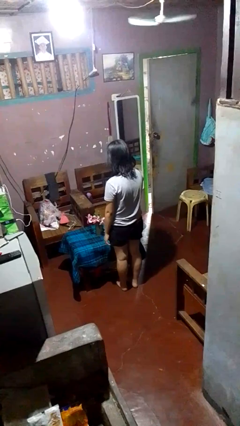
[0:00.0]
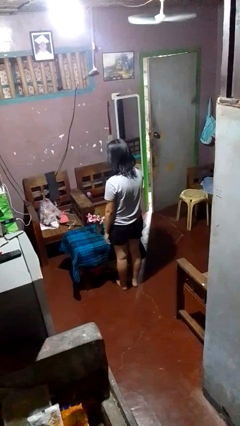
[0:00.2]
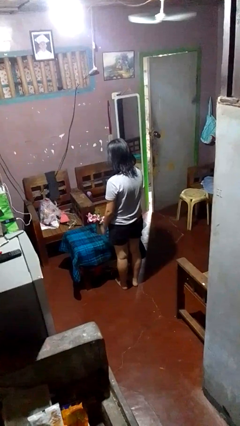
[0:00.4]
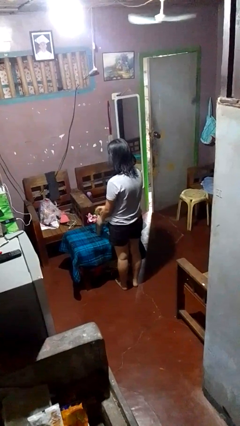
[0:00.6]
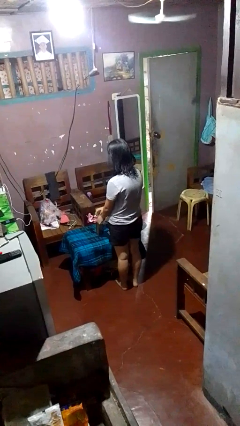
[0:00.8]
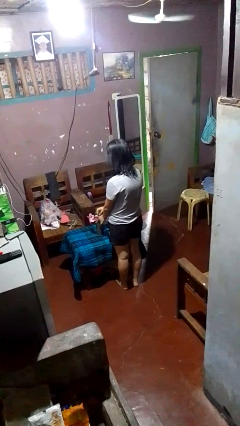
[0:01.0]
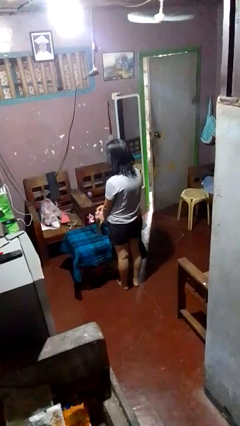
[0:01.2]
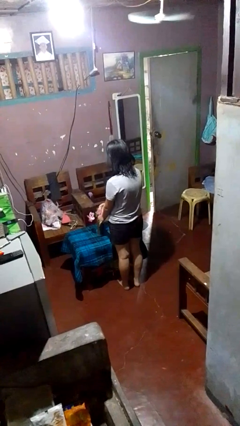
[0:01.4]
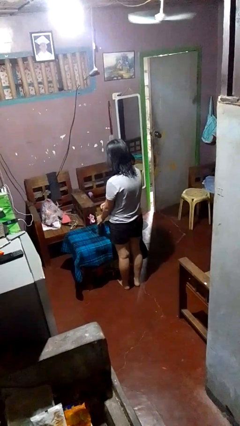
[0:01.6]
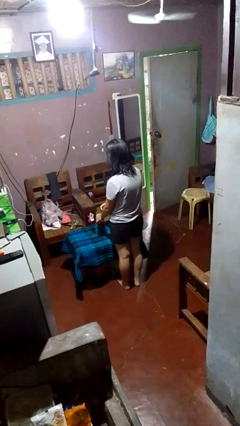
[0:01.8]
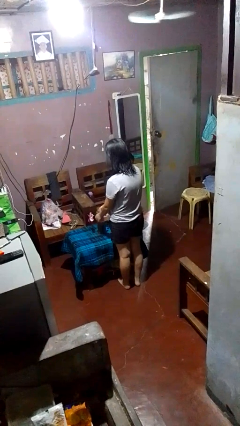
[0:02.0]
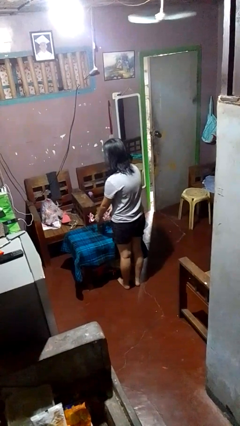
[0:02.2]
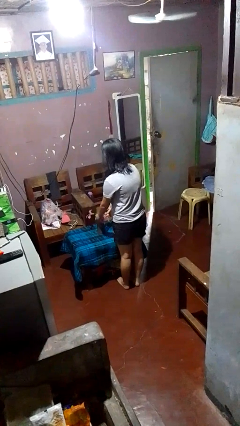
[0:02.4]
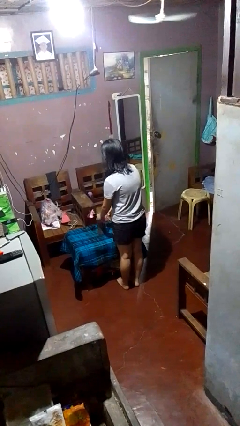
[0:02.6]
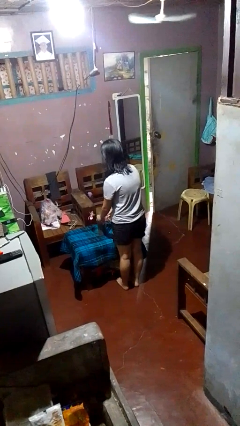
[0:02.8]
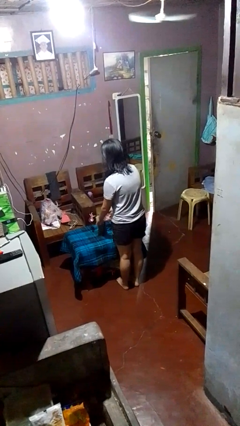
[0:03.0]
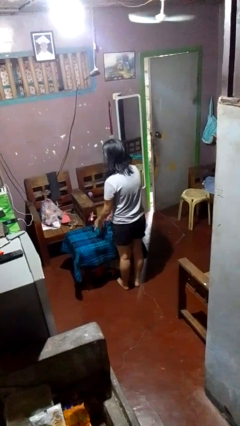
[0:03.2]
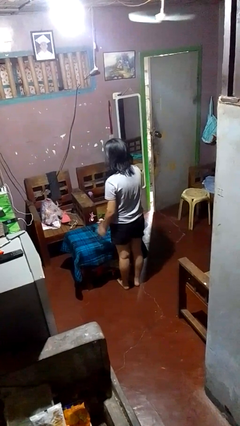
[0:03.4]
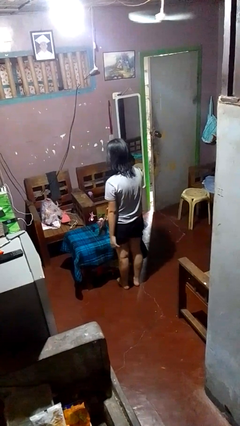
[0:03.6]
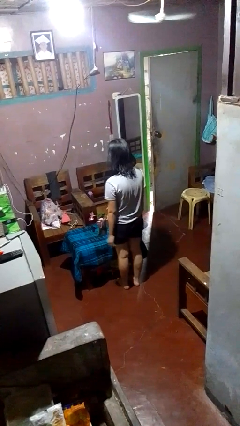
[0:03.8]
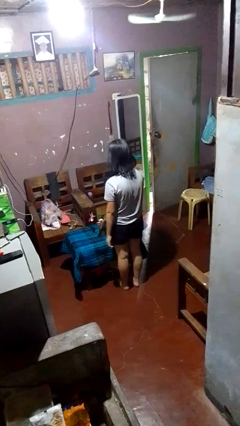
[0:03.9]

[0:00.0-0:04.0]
person arranges flowers in vase

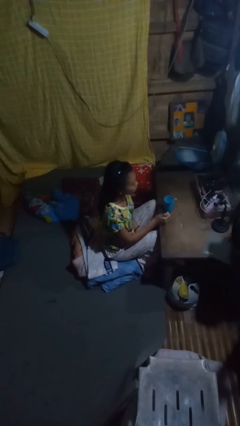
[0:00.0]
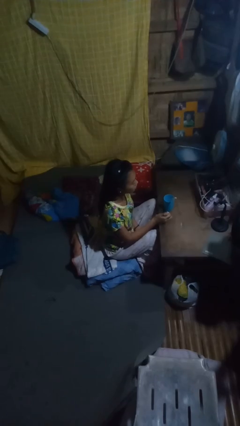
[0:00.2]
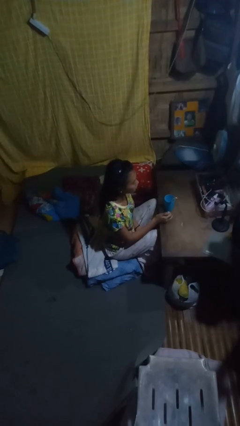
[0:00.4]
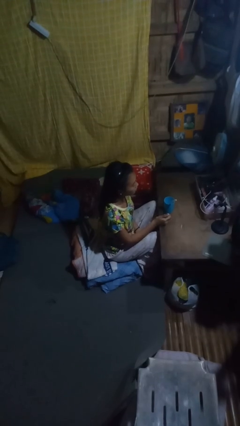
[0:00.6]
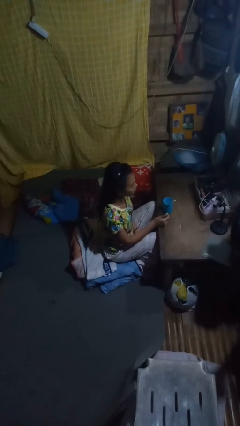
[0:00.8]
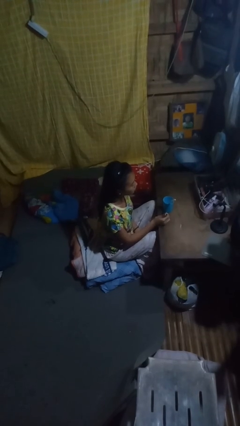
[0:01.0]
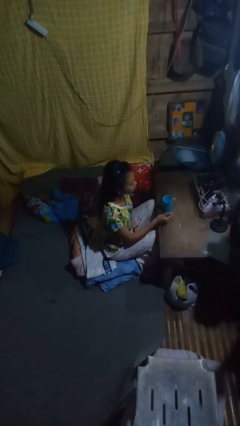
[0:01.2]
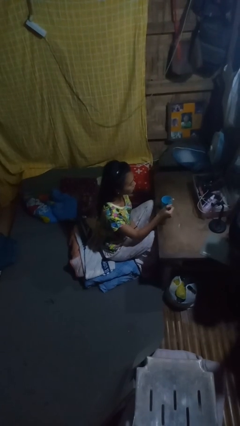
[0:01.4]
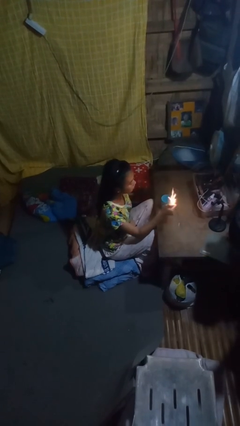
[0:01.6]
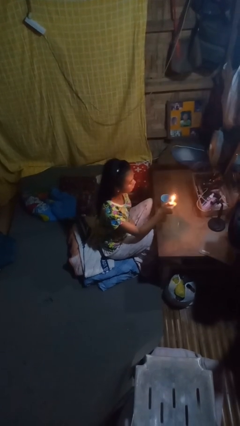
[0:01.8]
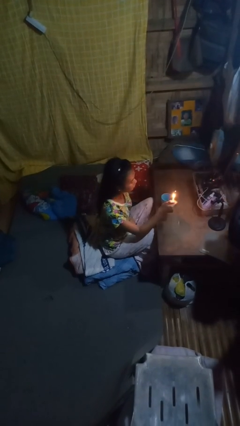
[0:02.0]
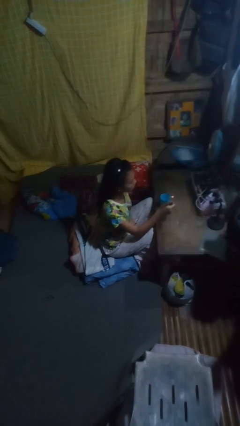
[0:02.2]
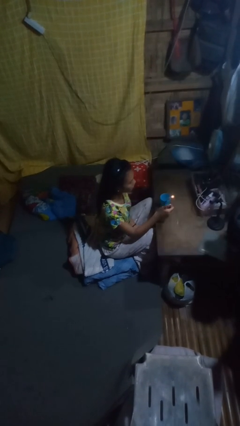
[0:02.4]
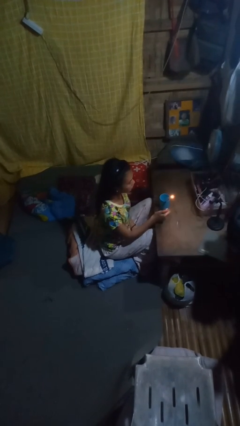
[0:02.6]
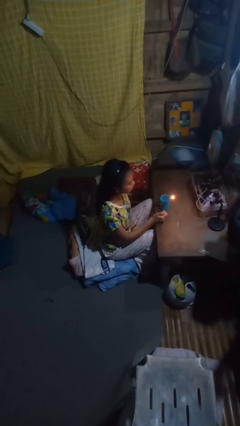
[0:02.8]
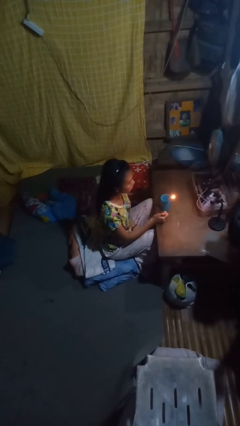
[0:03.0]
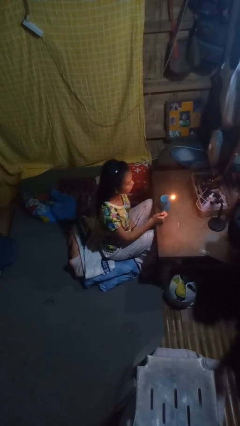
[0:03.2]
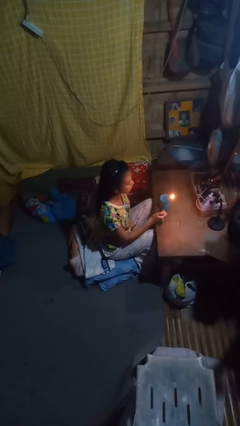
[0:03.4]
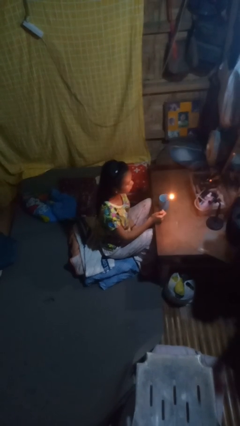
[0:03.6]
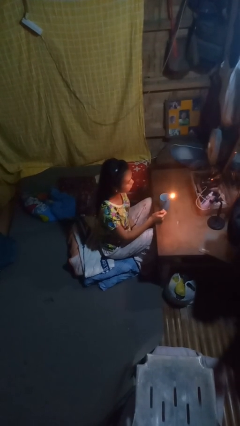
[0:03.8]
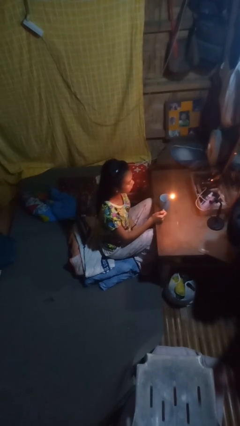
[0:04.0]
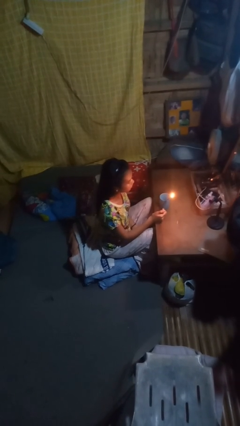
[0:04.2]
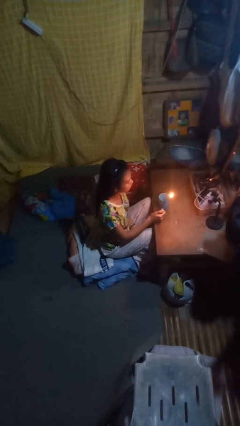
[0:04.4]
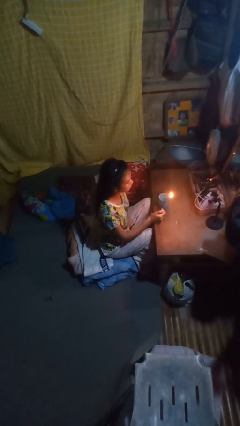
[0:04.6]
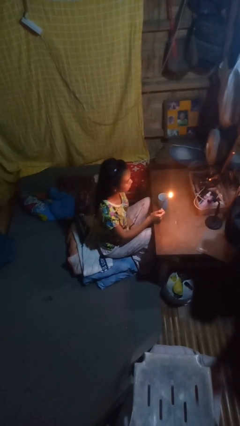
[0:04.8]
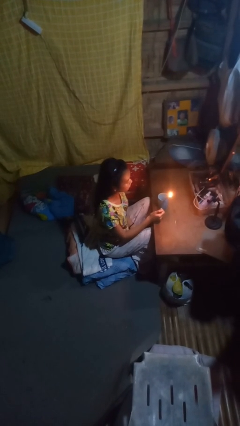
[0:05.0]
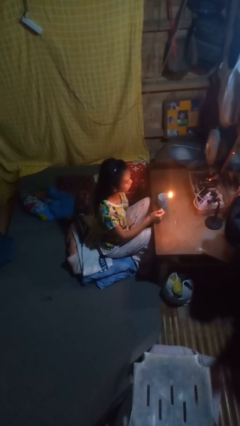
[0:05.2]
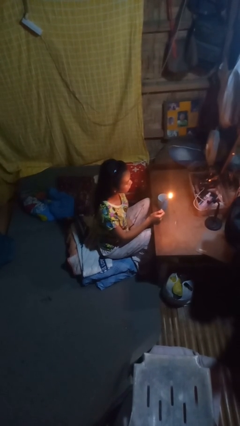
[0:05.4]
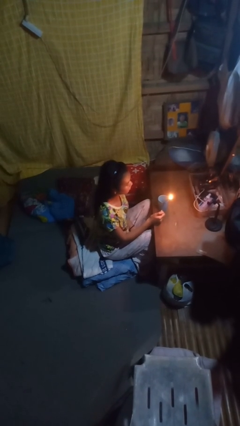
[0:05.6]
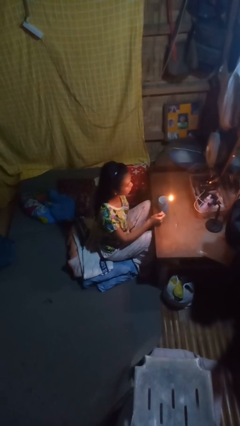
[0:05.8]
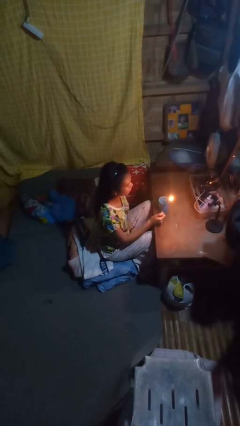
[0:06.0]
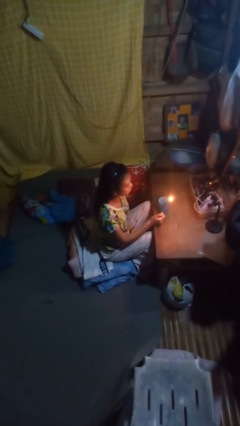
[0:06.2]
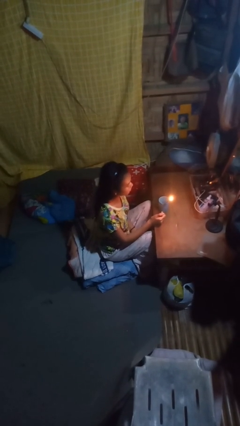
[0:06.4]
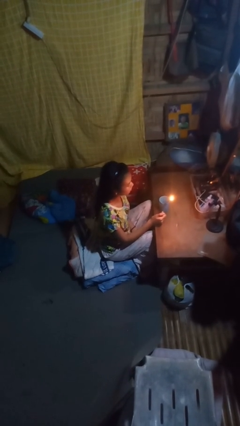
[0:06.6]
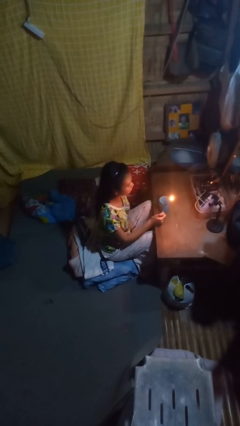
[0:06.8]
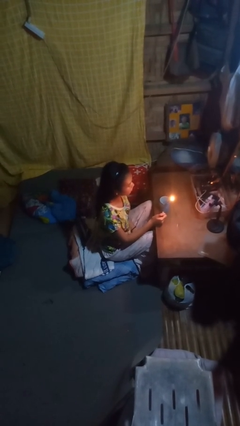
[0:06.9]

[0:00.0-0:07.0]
person lights candle

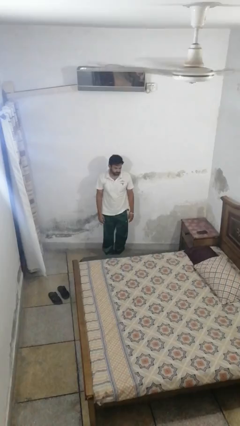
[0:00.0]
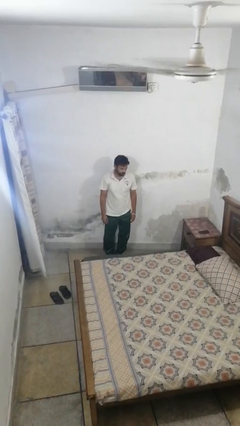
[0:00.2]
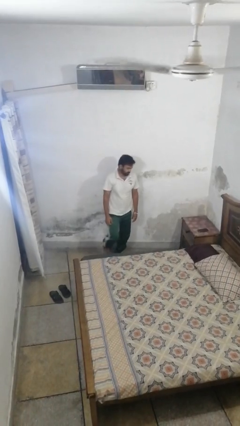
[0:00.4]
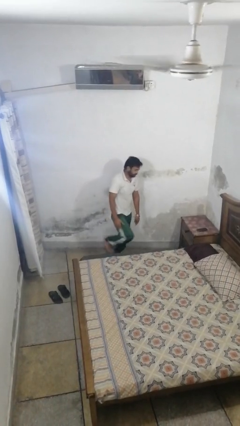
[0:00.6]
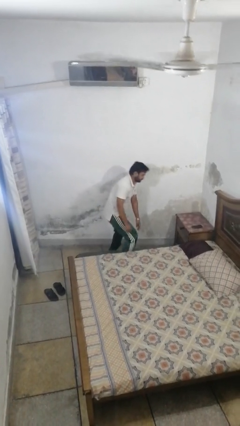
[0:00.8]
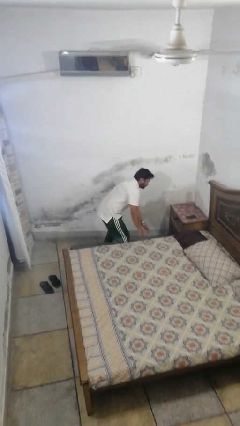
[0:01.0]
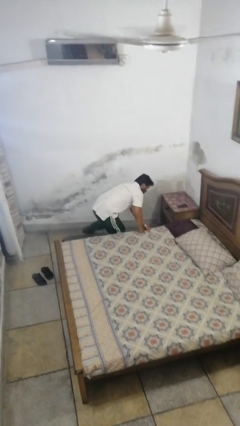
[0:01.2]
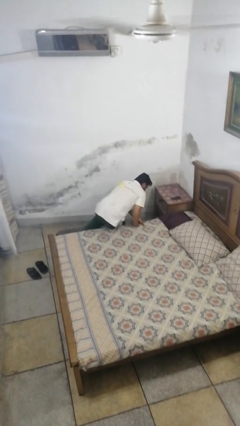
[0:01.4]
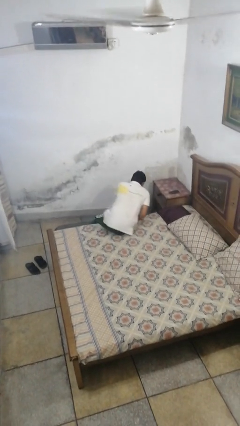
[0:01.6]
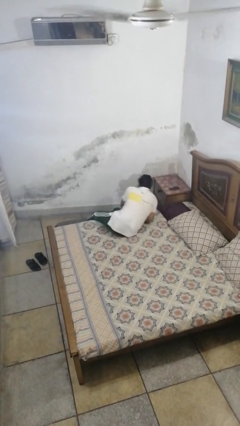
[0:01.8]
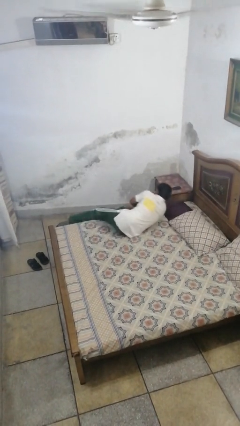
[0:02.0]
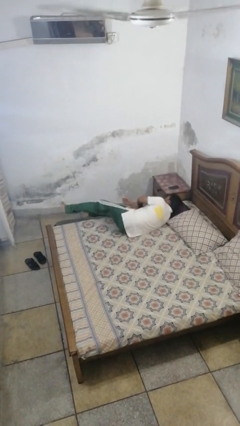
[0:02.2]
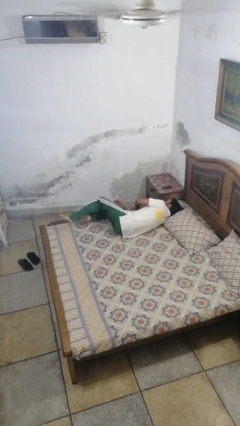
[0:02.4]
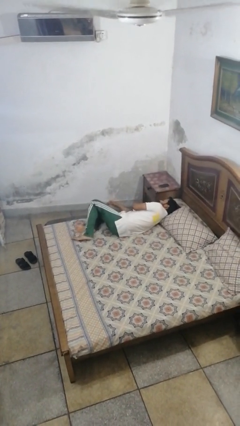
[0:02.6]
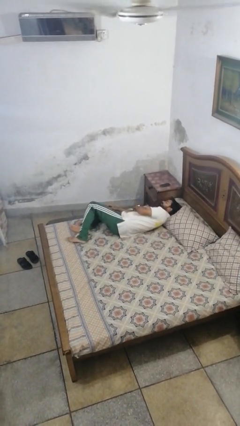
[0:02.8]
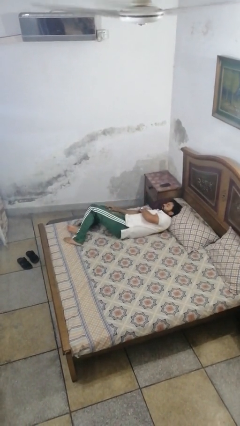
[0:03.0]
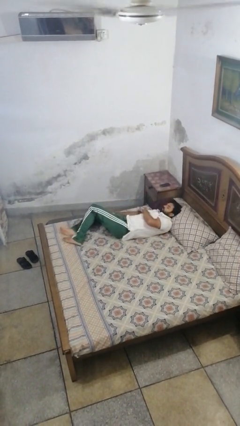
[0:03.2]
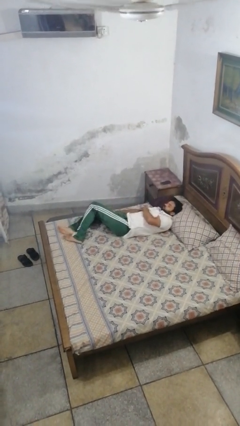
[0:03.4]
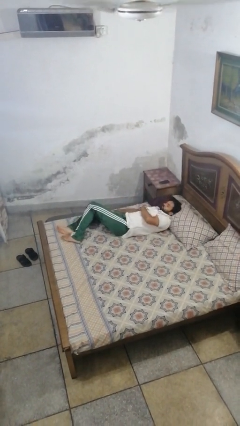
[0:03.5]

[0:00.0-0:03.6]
person lies down on bed

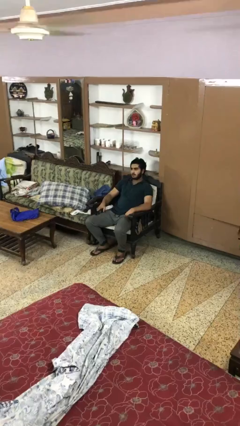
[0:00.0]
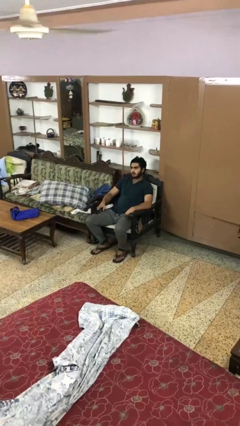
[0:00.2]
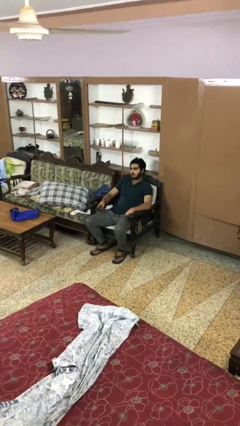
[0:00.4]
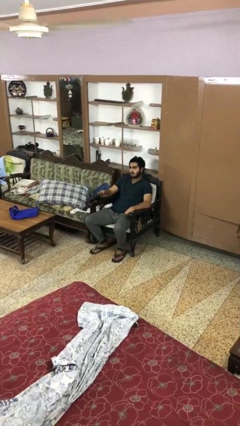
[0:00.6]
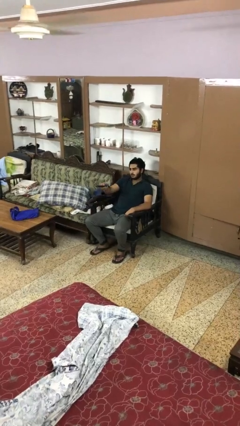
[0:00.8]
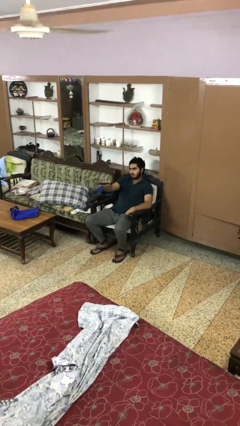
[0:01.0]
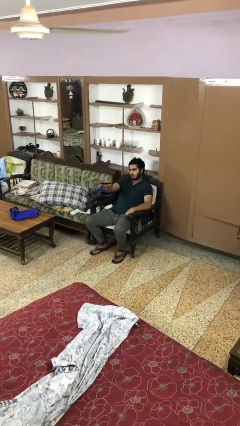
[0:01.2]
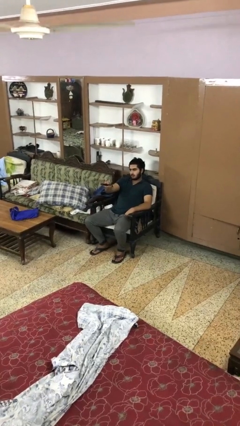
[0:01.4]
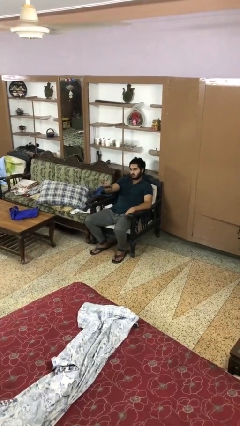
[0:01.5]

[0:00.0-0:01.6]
person uses television remote

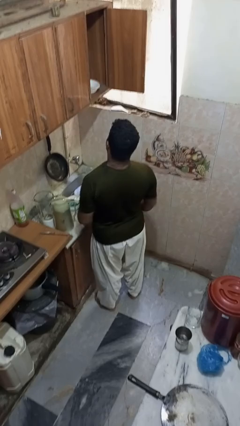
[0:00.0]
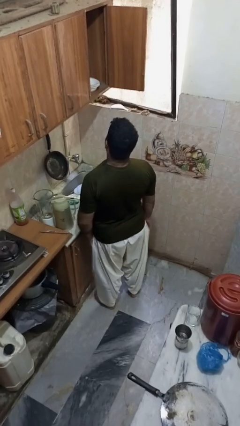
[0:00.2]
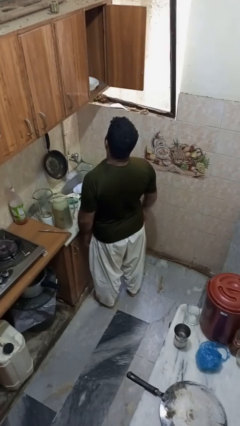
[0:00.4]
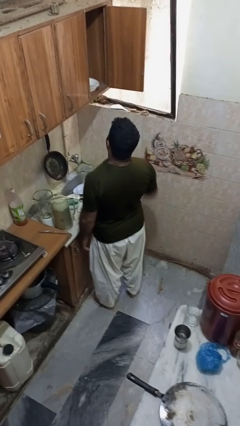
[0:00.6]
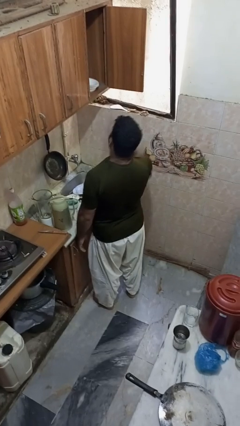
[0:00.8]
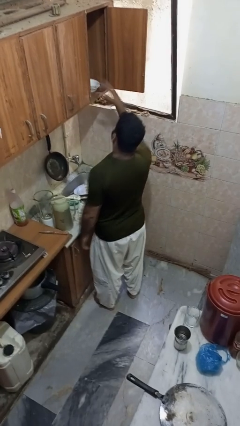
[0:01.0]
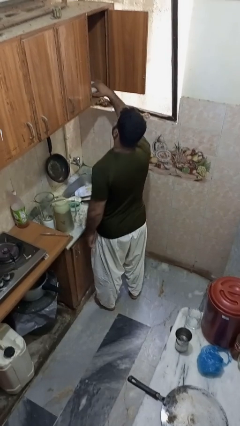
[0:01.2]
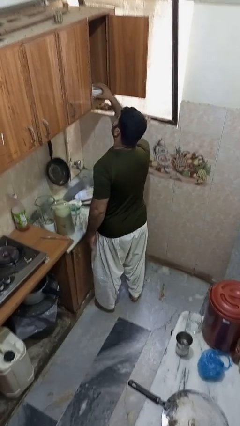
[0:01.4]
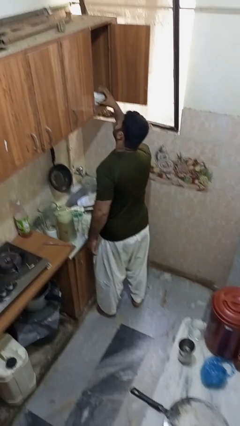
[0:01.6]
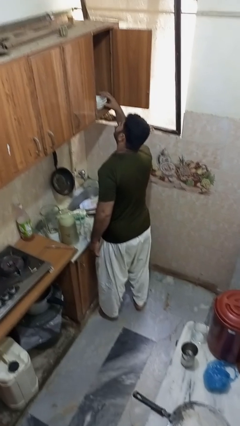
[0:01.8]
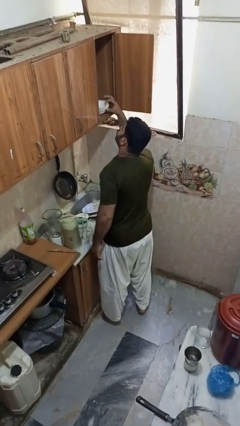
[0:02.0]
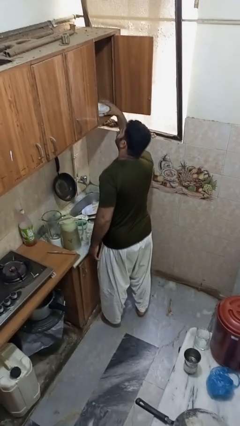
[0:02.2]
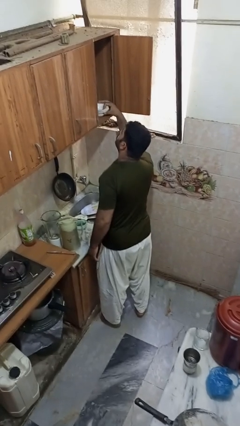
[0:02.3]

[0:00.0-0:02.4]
person takes object from cabinet
